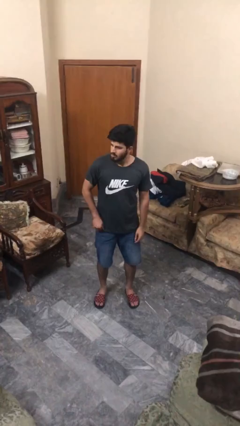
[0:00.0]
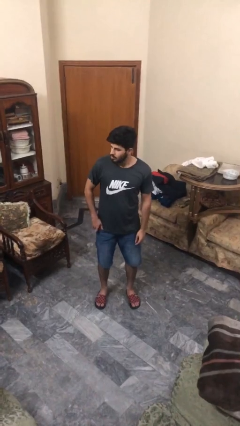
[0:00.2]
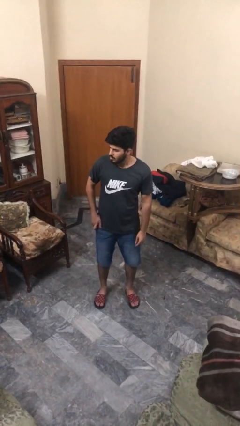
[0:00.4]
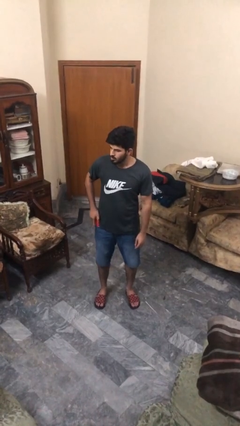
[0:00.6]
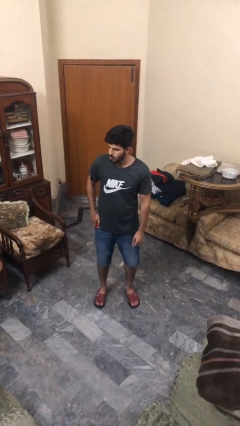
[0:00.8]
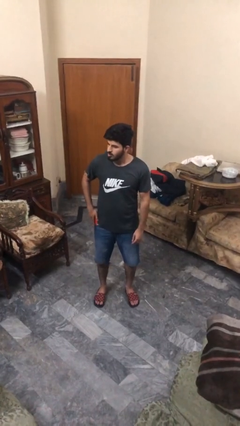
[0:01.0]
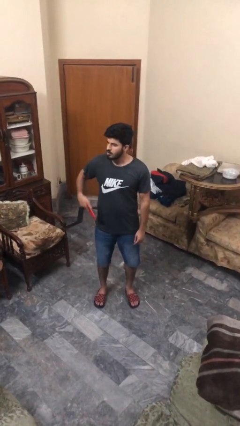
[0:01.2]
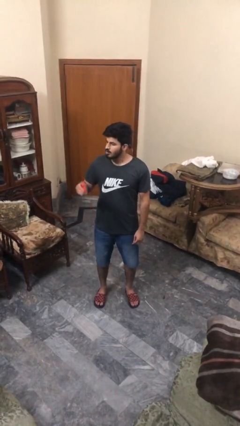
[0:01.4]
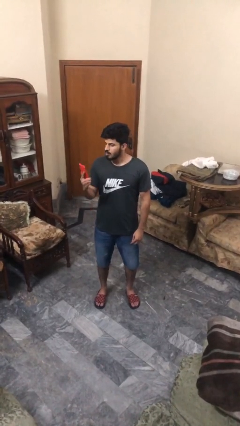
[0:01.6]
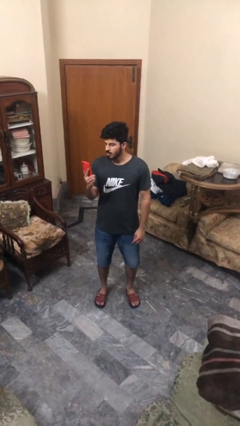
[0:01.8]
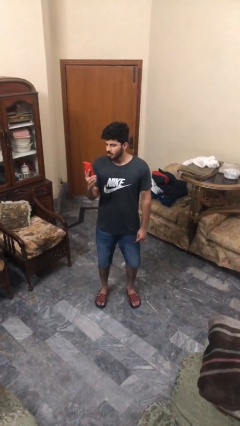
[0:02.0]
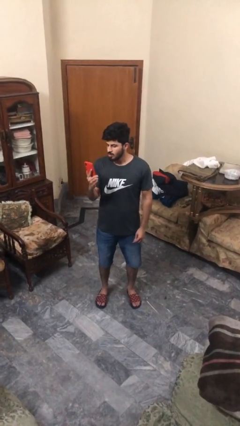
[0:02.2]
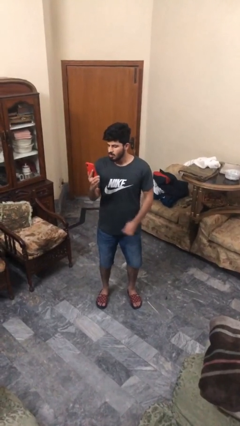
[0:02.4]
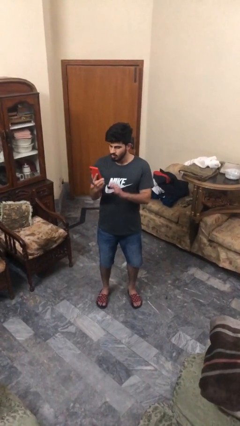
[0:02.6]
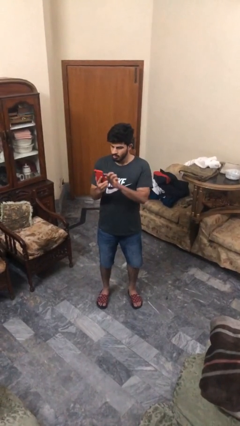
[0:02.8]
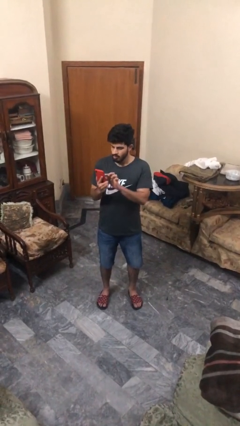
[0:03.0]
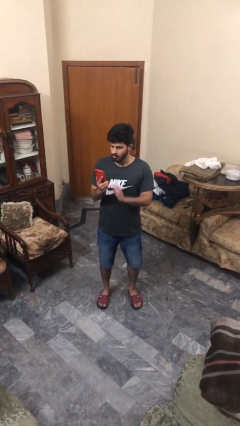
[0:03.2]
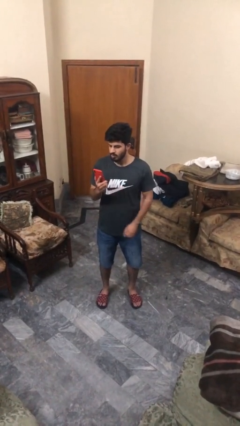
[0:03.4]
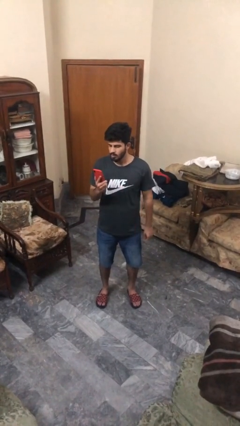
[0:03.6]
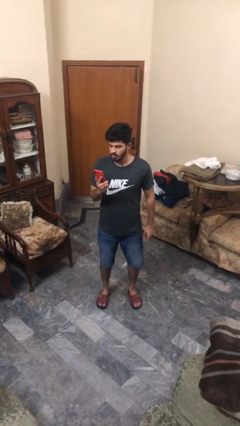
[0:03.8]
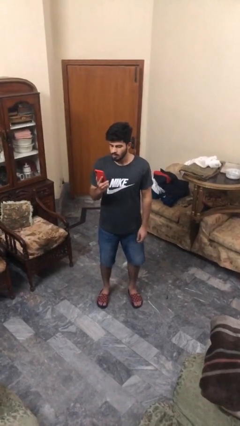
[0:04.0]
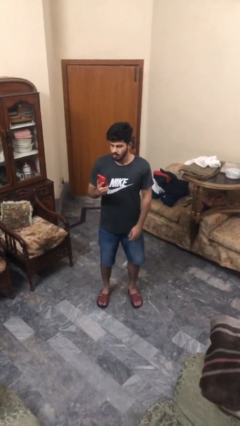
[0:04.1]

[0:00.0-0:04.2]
person takes phone from pocket

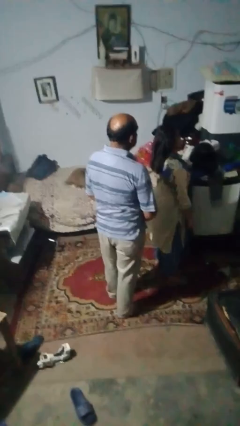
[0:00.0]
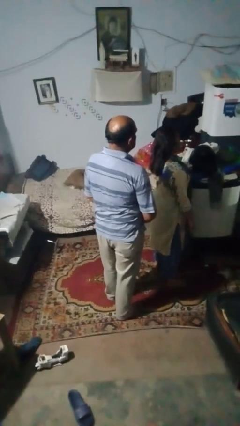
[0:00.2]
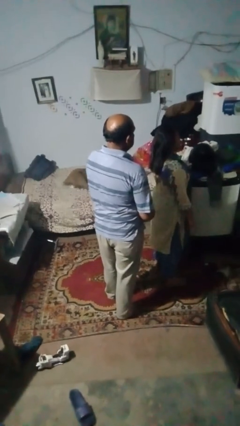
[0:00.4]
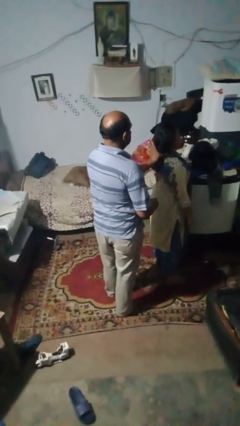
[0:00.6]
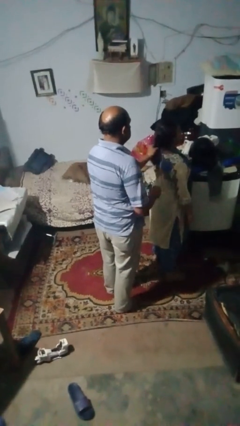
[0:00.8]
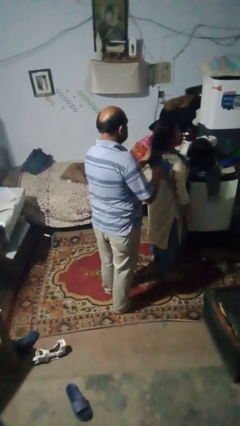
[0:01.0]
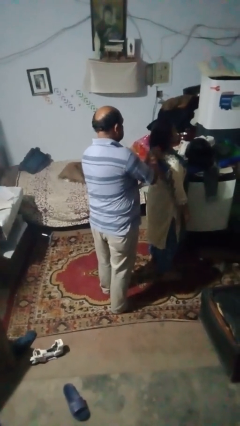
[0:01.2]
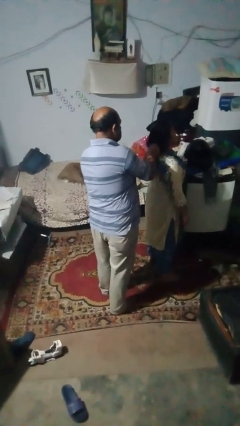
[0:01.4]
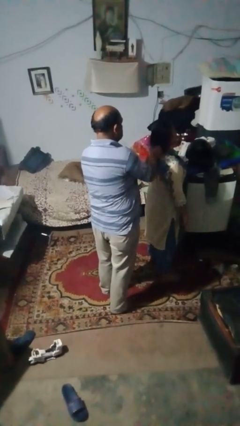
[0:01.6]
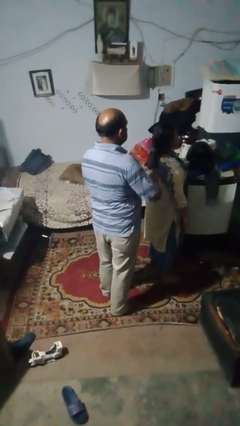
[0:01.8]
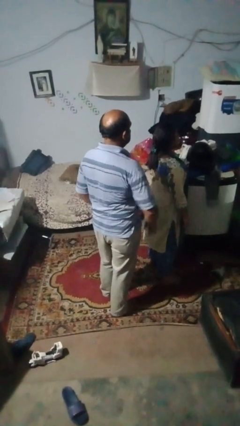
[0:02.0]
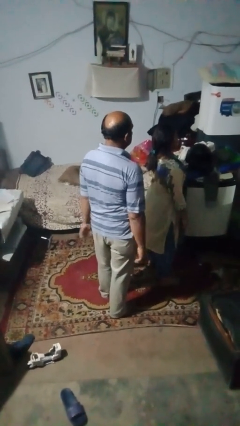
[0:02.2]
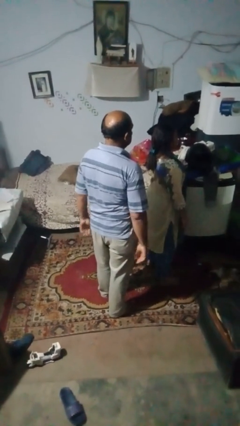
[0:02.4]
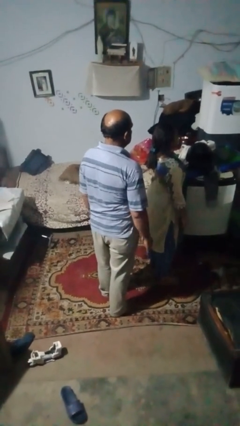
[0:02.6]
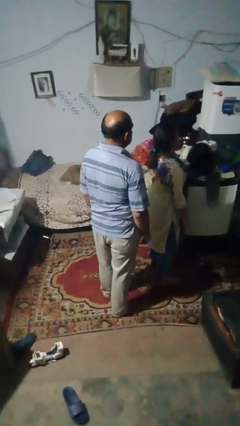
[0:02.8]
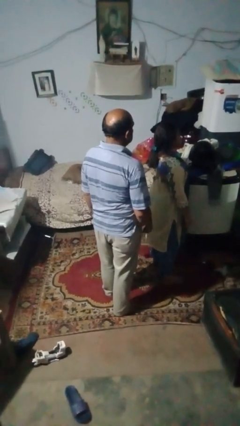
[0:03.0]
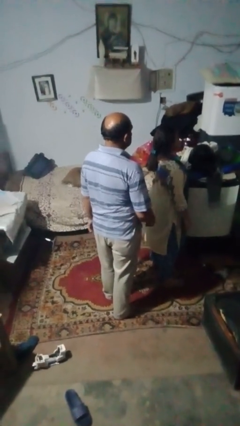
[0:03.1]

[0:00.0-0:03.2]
person braids hair of person

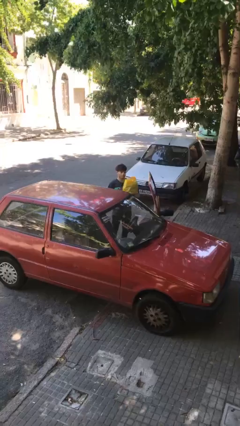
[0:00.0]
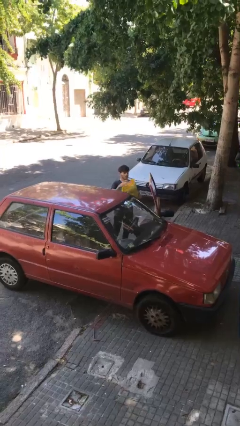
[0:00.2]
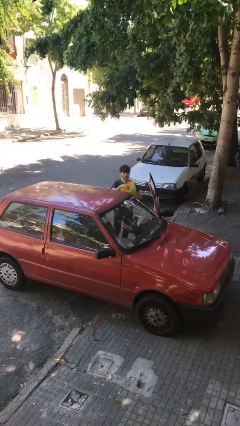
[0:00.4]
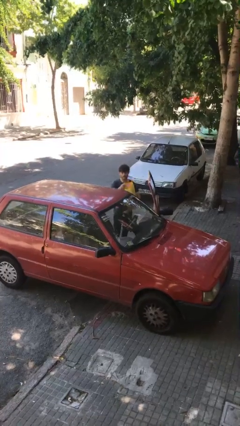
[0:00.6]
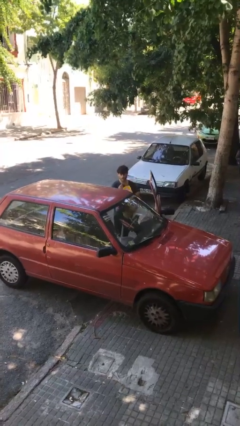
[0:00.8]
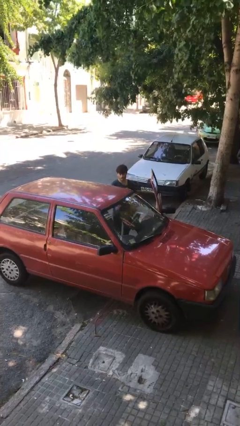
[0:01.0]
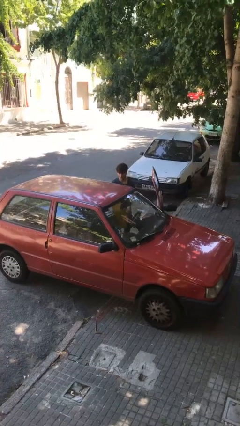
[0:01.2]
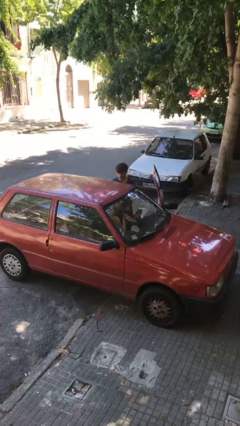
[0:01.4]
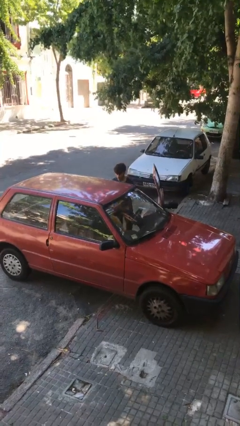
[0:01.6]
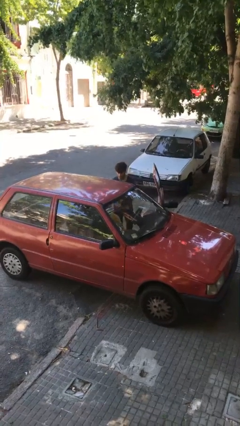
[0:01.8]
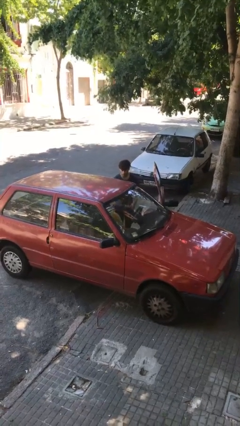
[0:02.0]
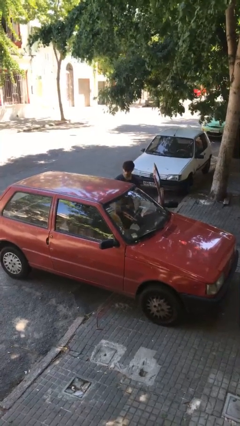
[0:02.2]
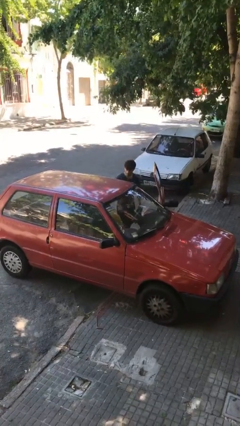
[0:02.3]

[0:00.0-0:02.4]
person loads car

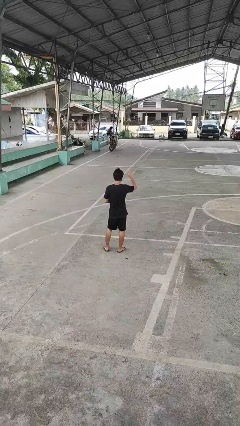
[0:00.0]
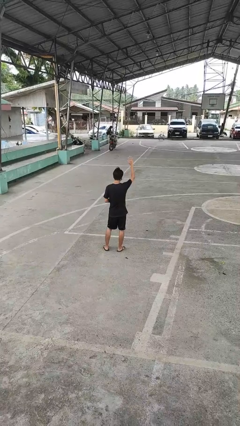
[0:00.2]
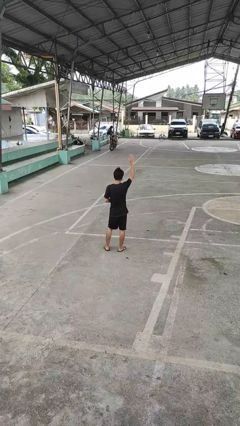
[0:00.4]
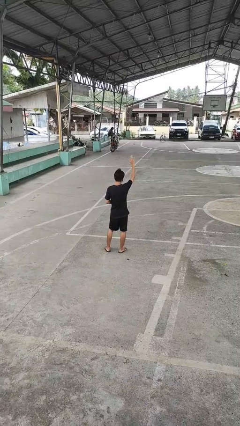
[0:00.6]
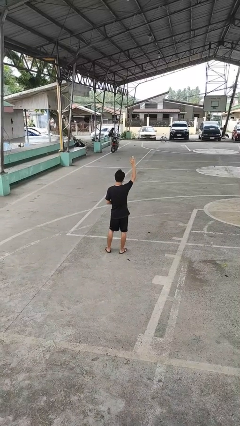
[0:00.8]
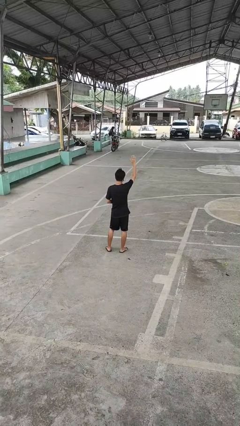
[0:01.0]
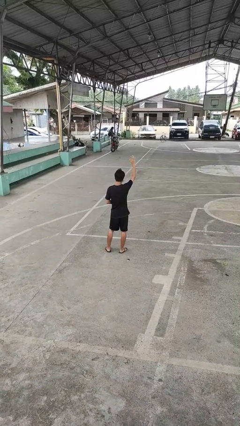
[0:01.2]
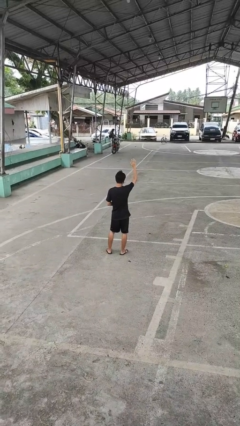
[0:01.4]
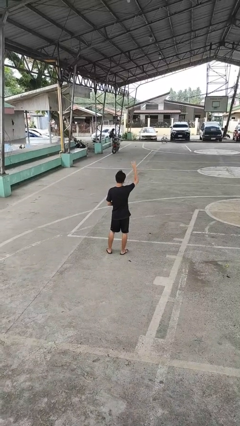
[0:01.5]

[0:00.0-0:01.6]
person gestures raise hand

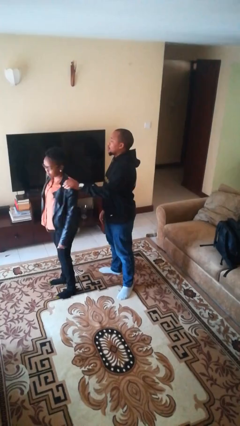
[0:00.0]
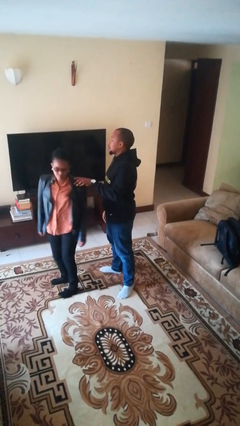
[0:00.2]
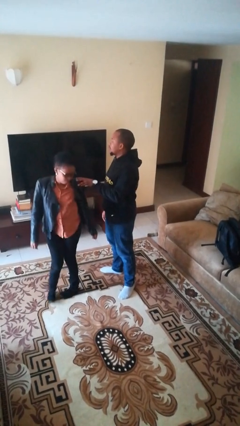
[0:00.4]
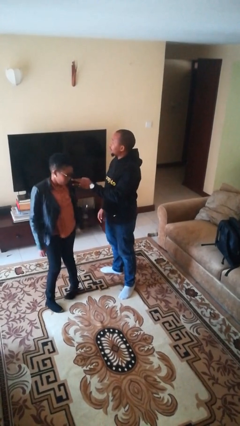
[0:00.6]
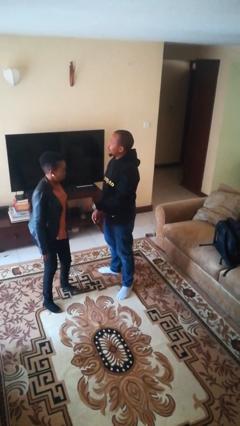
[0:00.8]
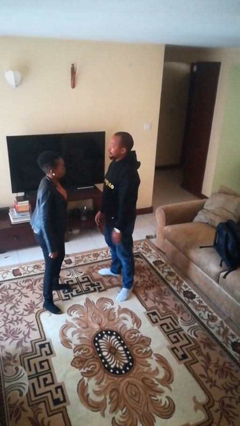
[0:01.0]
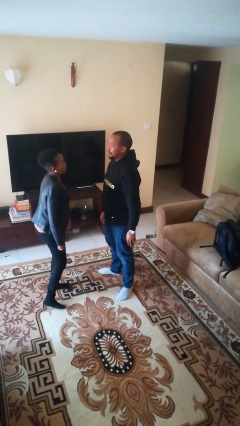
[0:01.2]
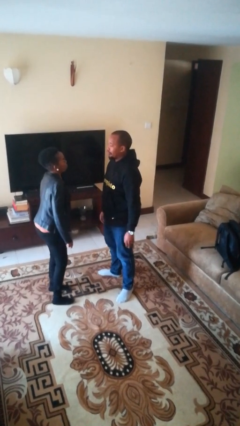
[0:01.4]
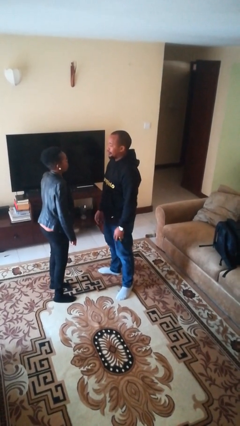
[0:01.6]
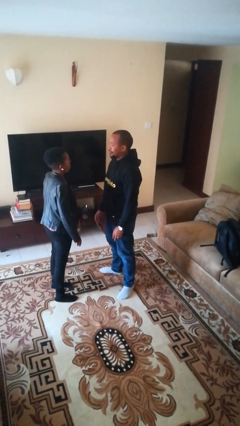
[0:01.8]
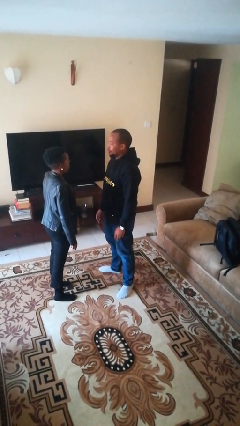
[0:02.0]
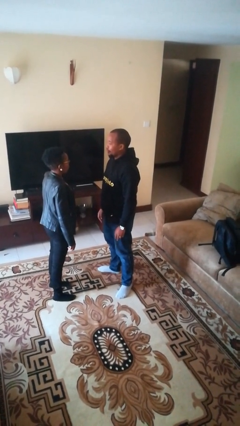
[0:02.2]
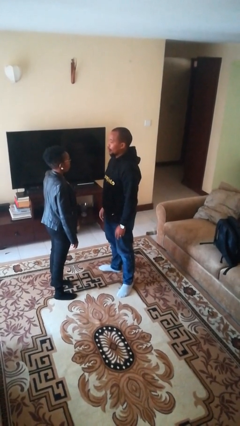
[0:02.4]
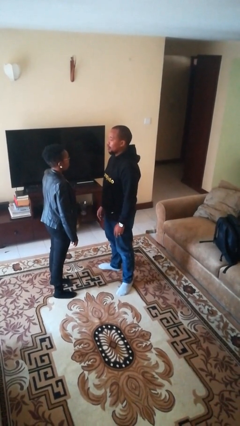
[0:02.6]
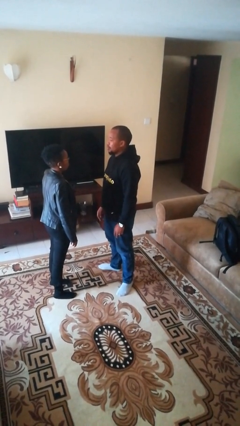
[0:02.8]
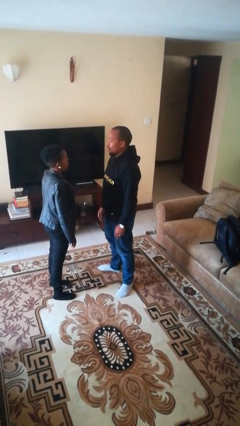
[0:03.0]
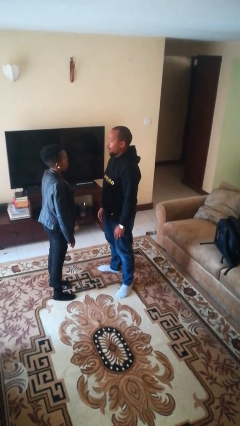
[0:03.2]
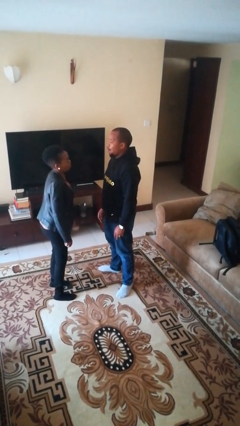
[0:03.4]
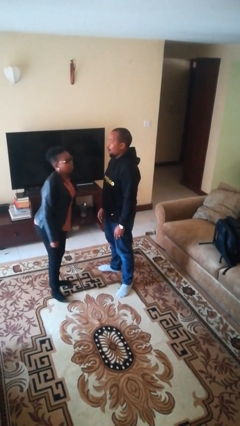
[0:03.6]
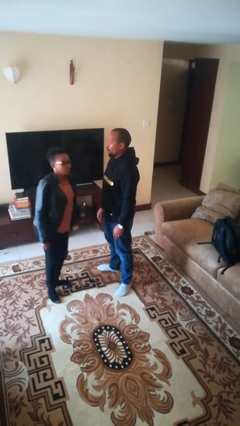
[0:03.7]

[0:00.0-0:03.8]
person spins person around

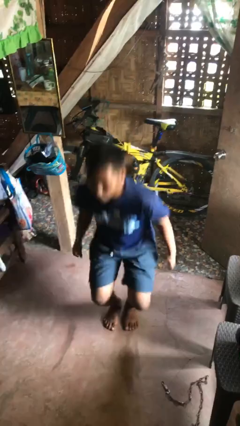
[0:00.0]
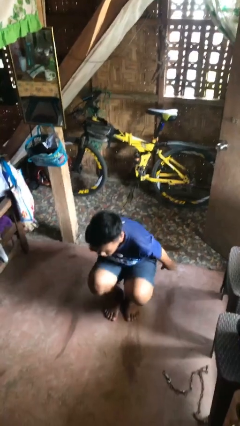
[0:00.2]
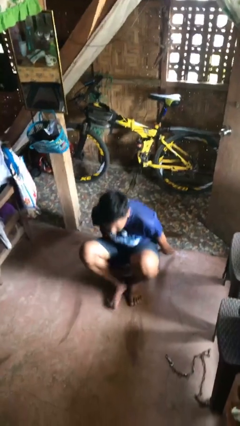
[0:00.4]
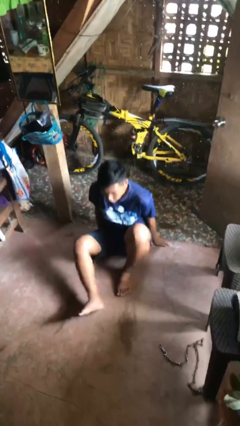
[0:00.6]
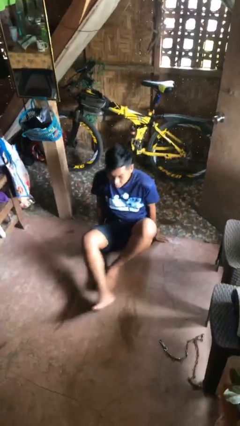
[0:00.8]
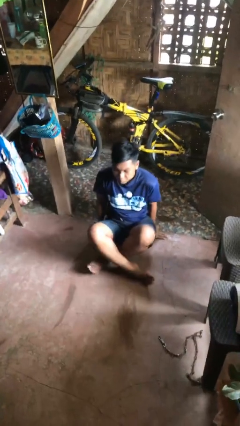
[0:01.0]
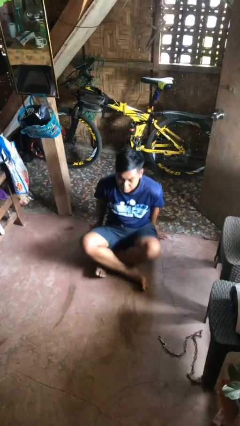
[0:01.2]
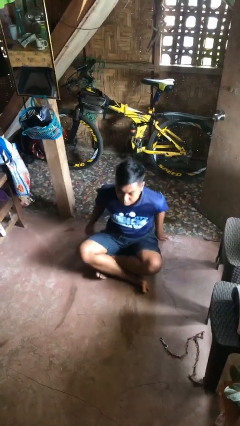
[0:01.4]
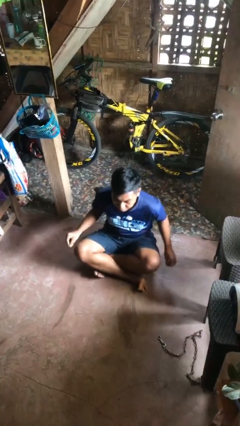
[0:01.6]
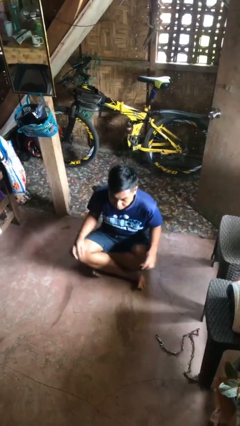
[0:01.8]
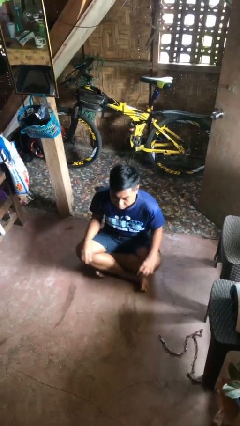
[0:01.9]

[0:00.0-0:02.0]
person sits crisscross
